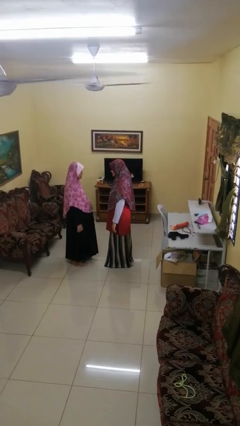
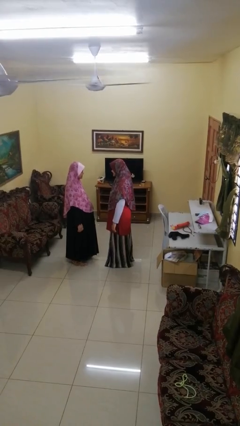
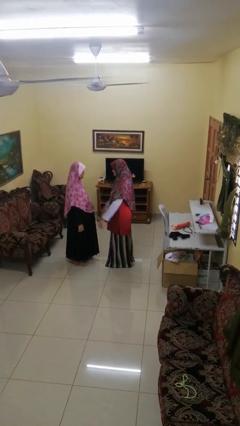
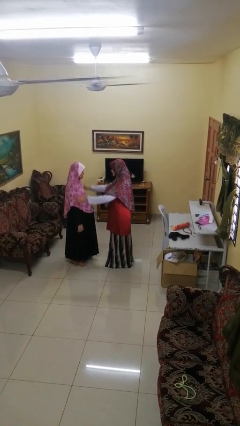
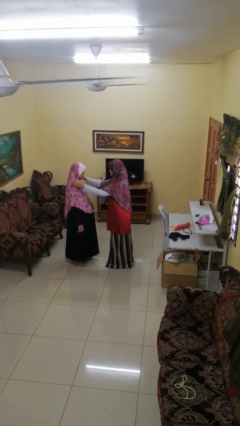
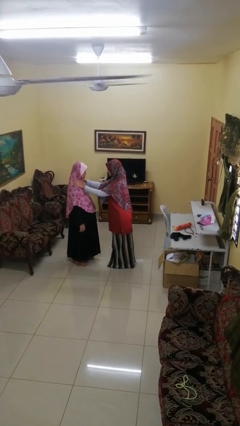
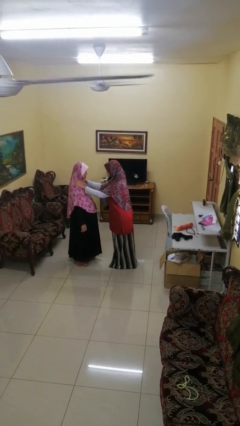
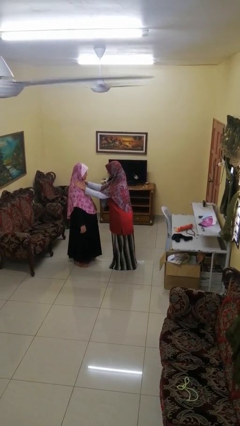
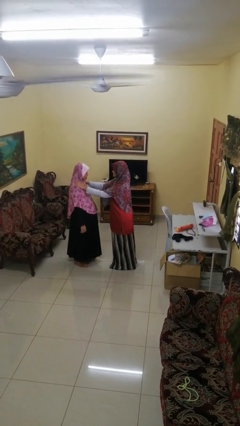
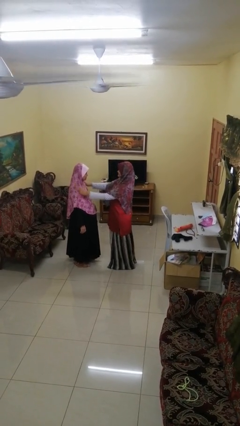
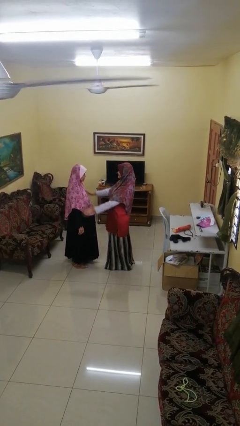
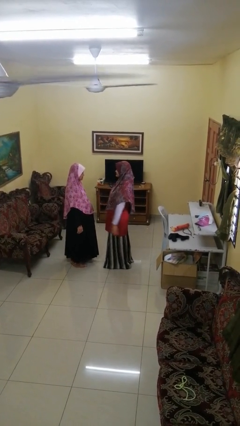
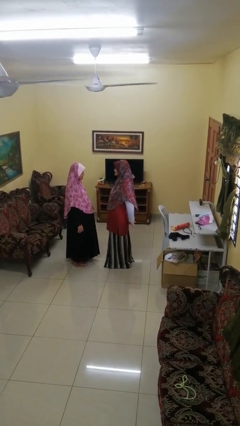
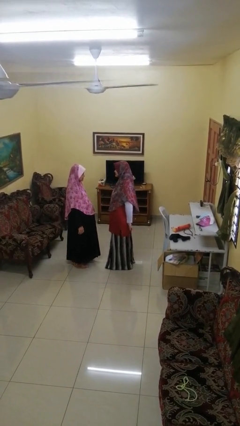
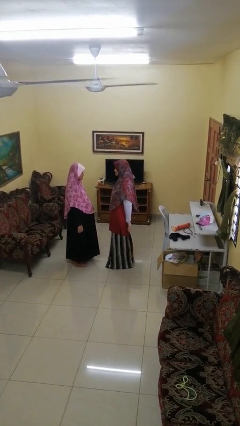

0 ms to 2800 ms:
person pounds shoulders of person

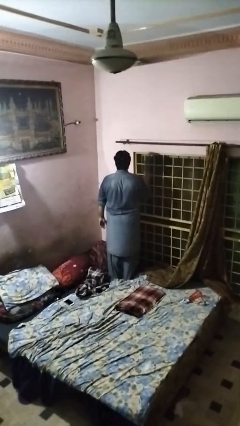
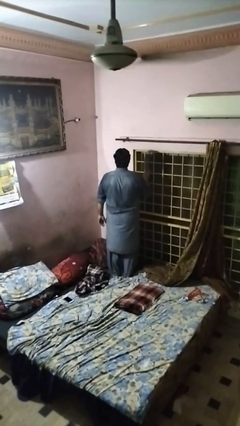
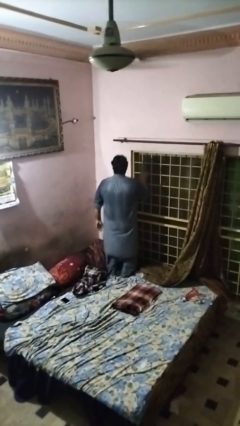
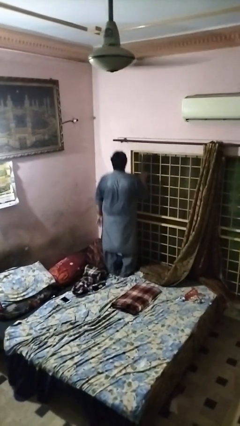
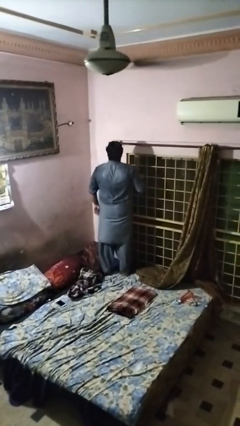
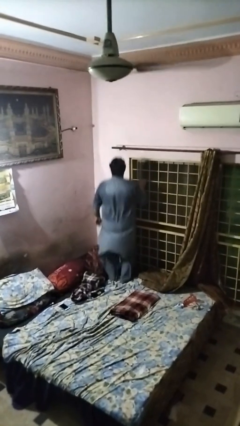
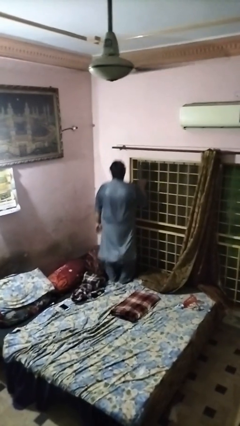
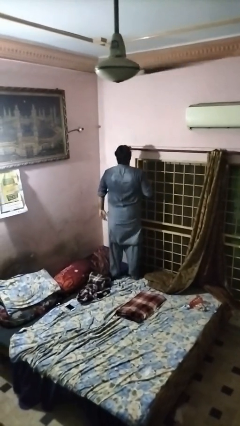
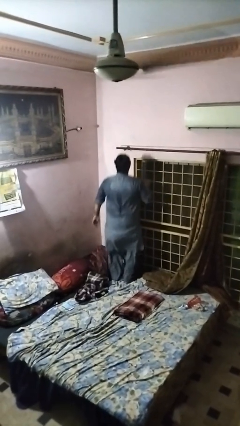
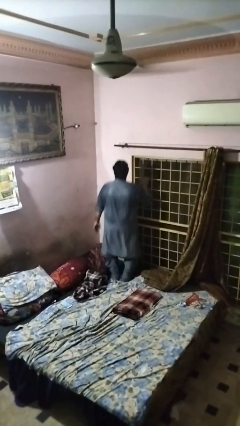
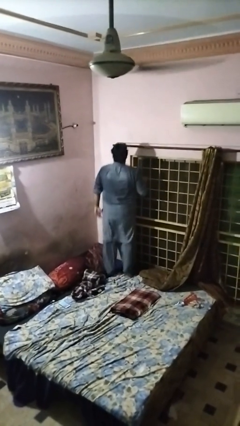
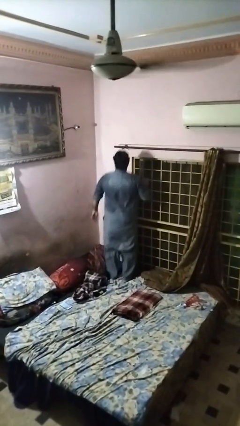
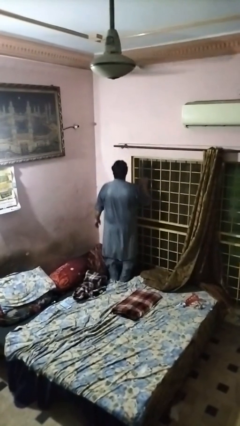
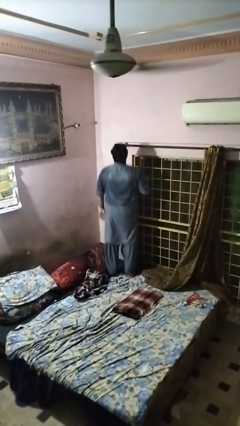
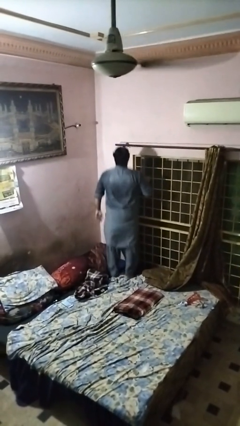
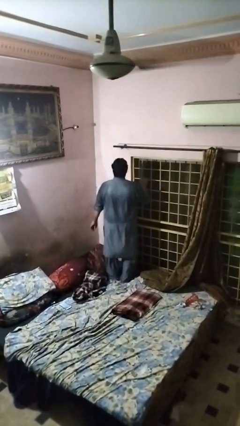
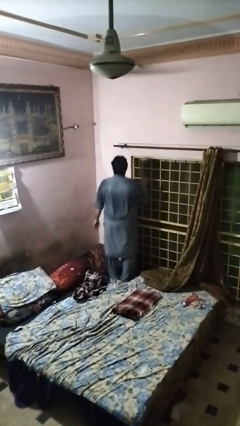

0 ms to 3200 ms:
person jumps on bed

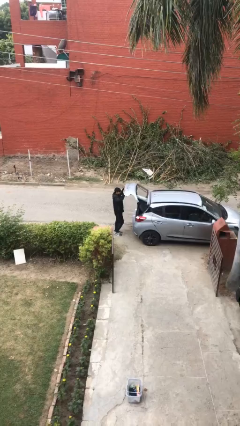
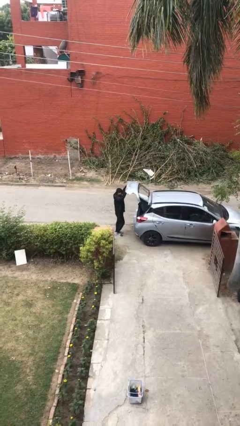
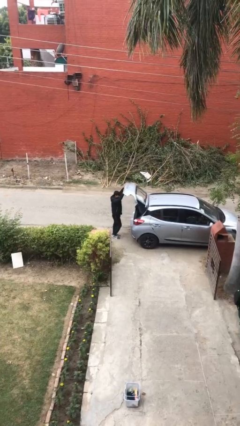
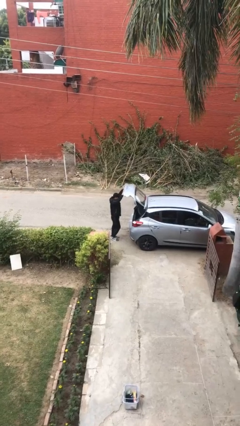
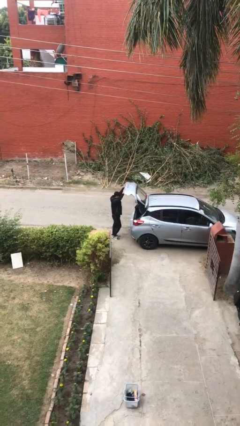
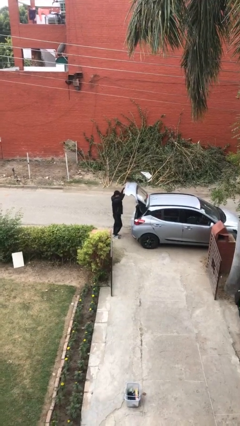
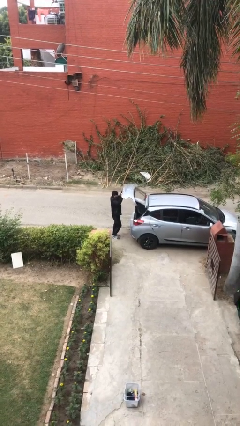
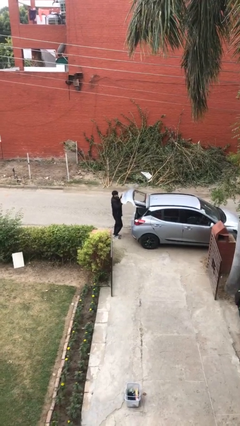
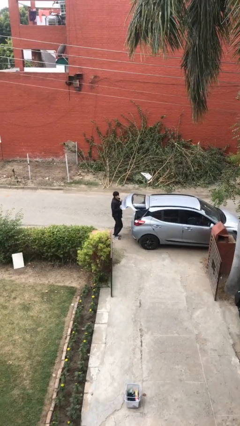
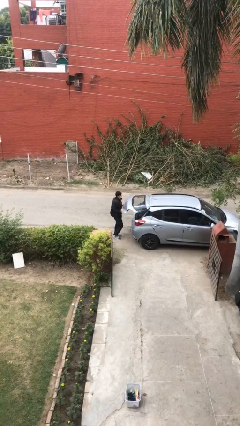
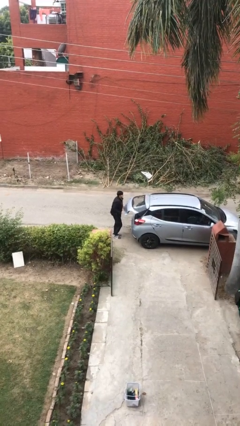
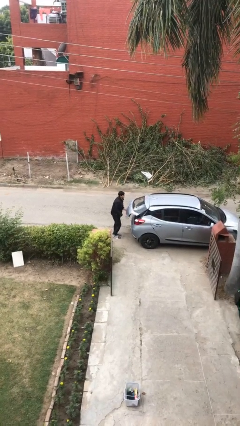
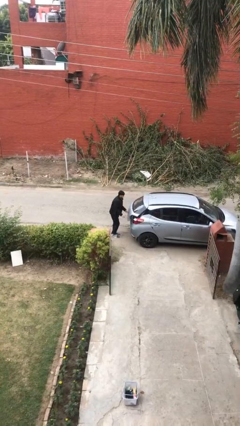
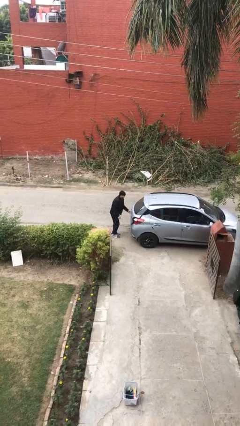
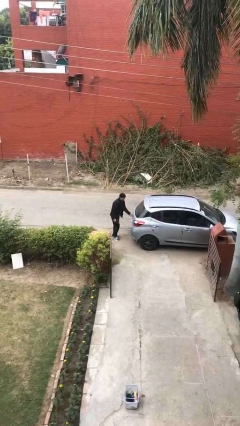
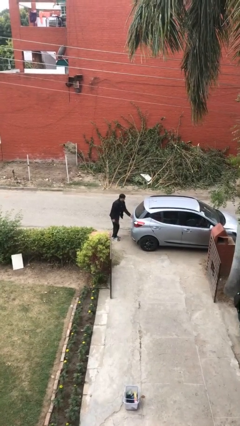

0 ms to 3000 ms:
person closes car trunk

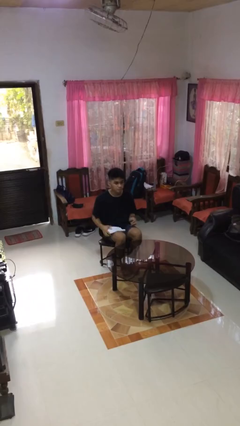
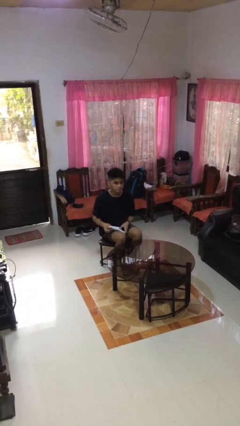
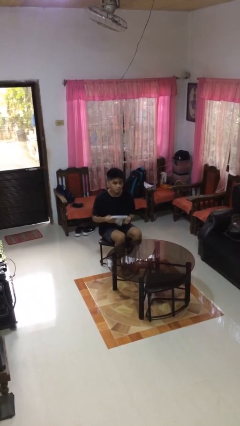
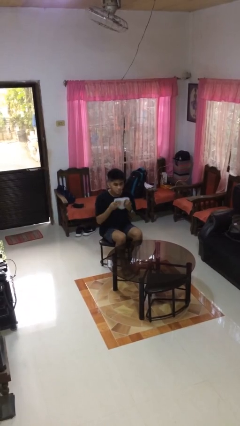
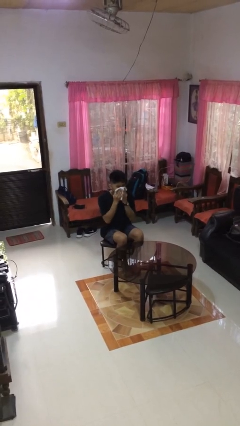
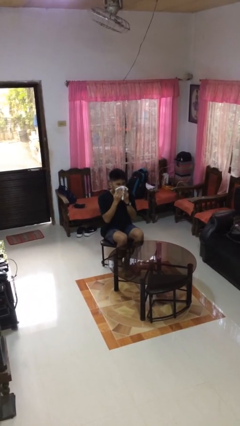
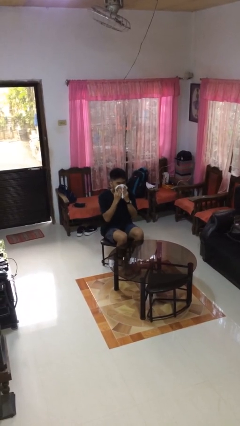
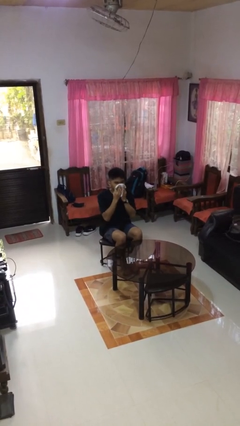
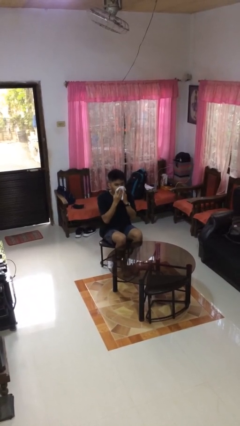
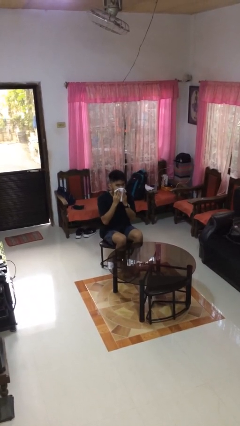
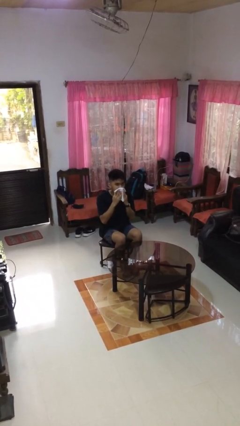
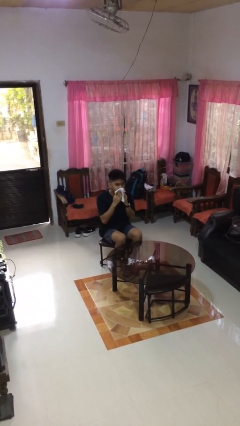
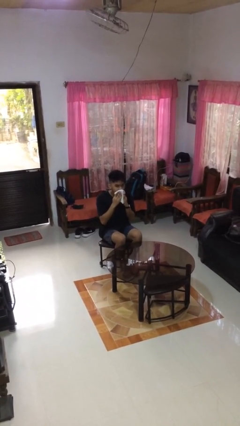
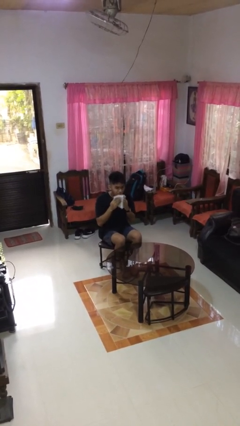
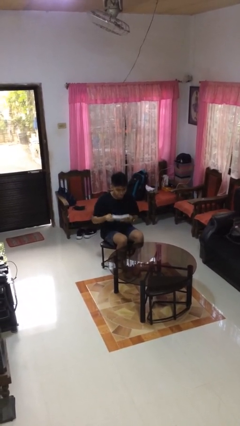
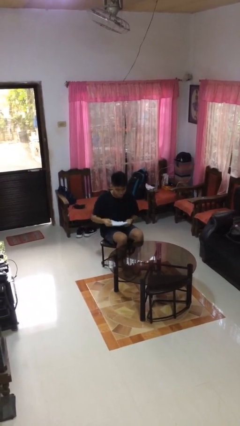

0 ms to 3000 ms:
person wipes mouth with napkin

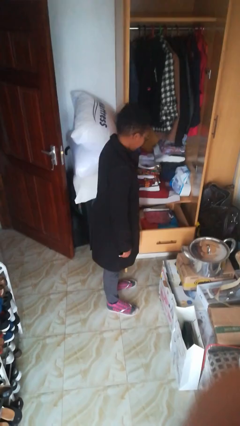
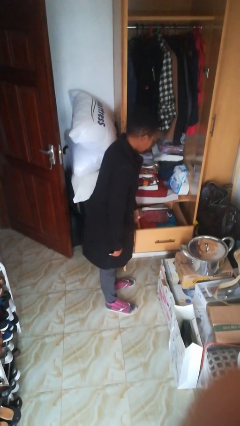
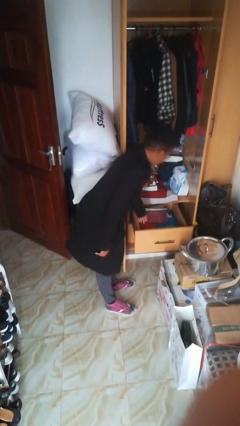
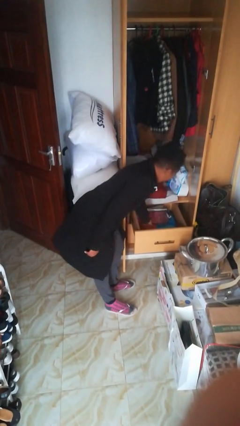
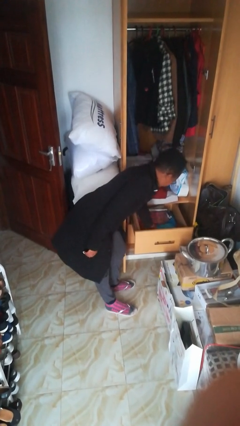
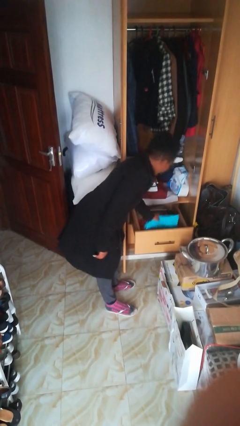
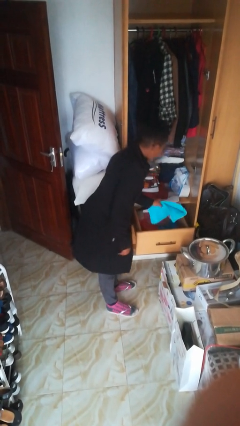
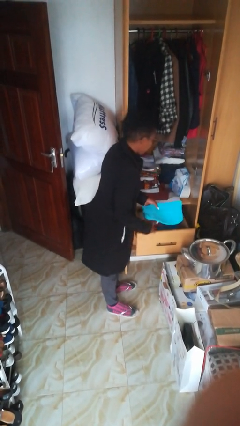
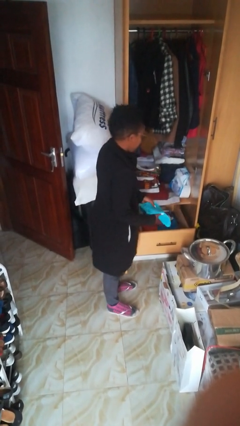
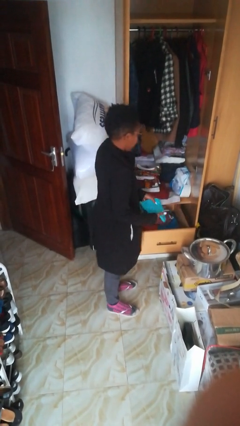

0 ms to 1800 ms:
person takes clothes from dresser

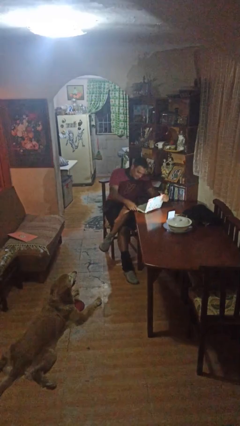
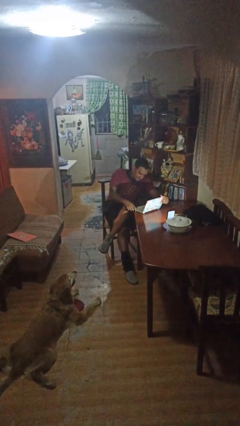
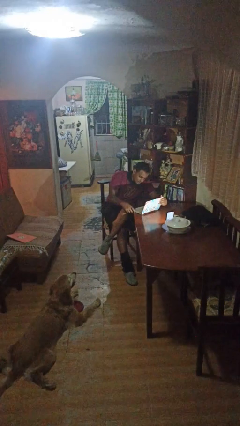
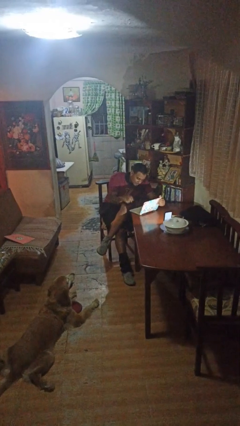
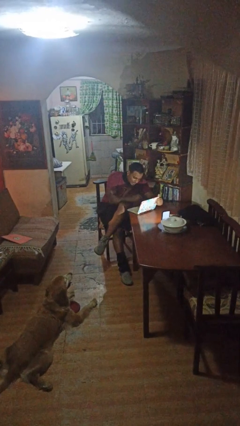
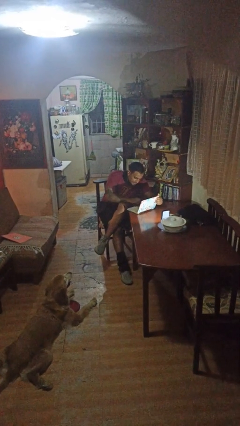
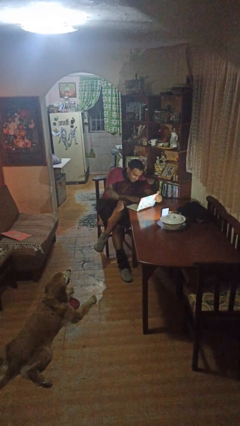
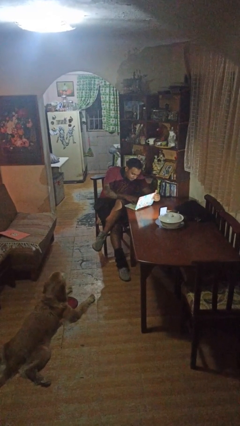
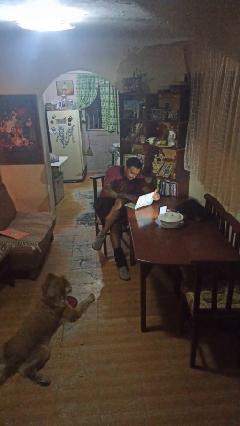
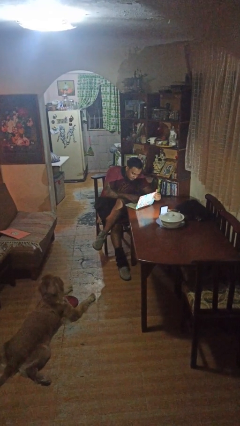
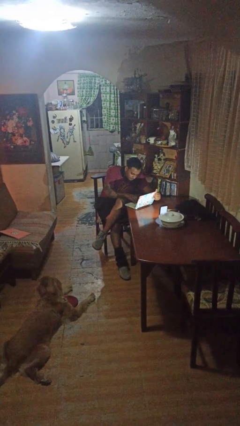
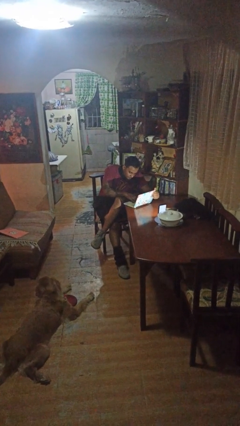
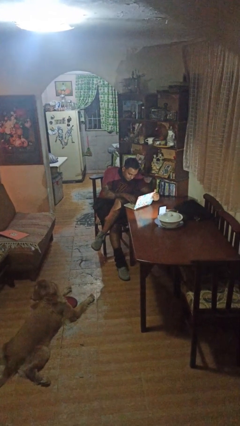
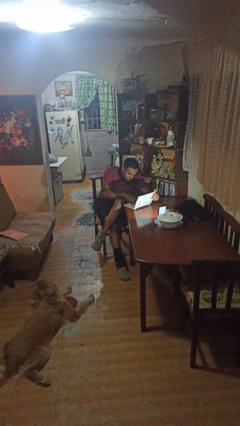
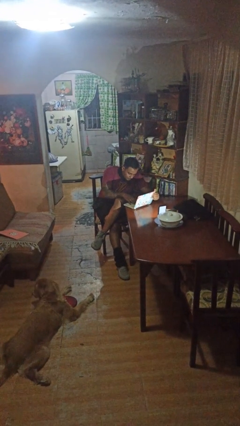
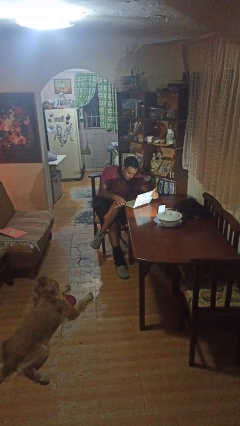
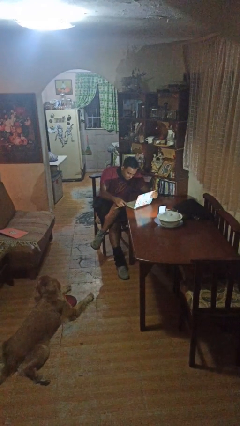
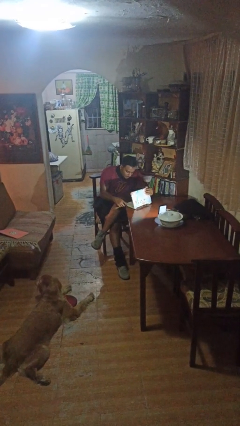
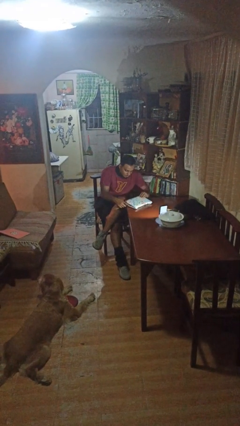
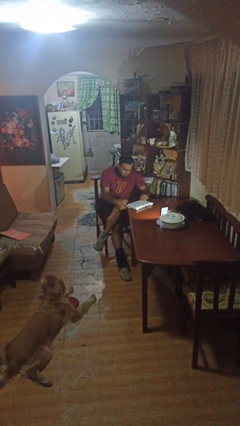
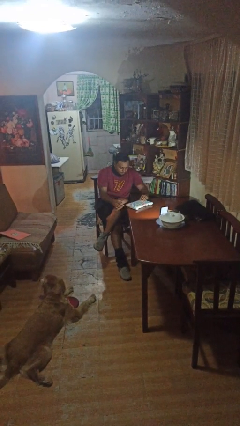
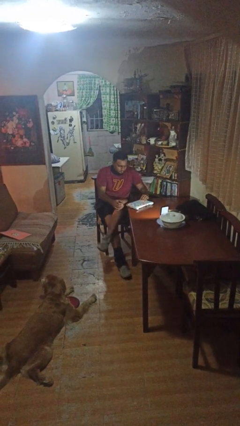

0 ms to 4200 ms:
person interacts with laptop
